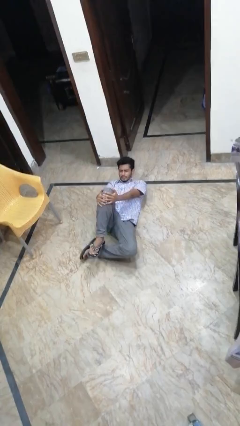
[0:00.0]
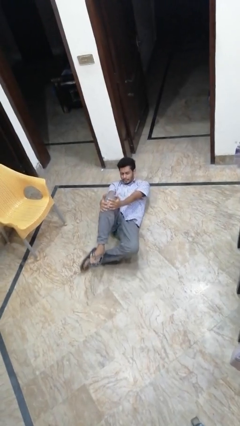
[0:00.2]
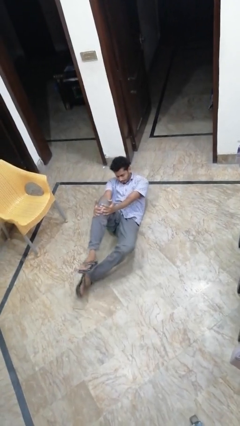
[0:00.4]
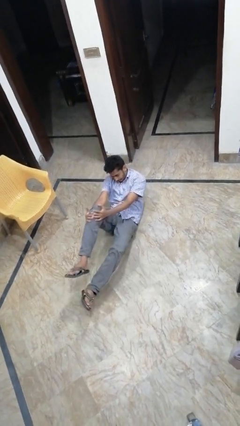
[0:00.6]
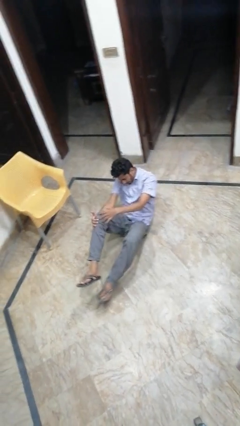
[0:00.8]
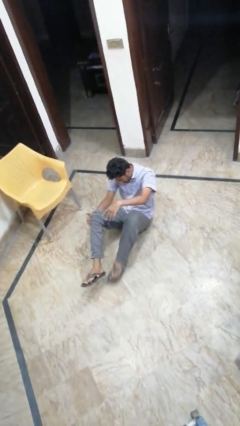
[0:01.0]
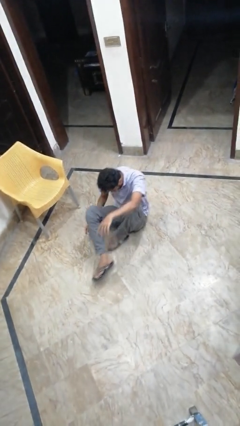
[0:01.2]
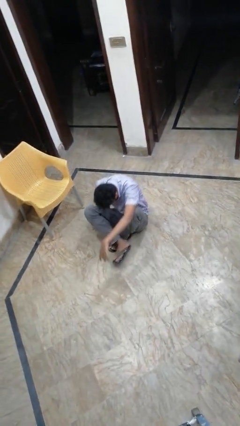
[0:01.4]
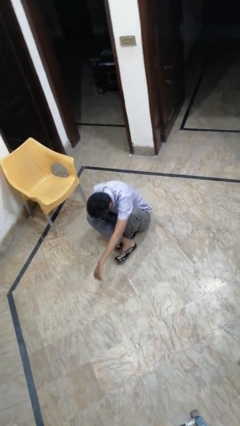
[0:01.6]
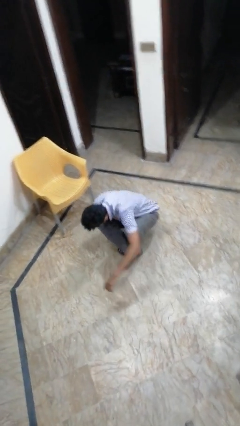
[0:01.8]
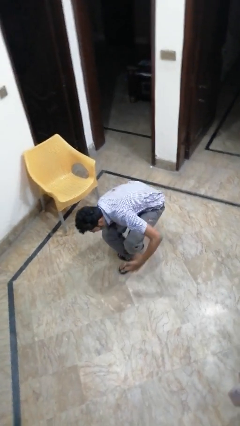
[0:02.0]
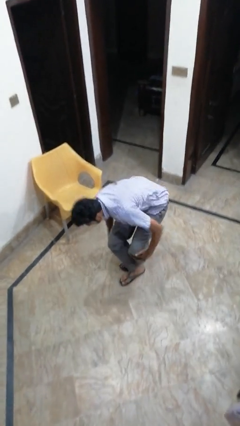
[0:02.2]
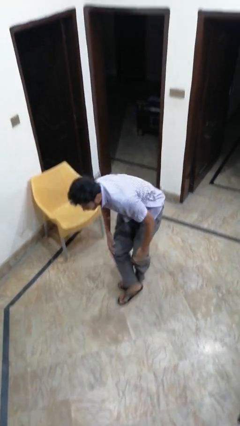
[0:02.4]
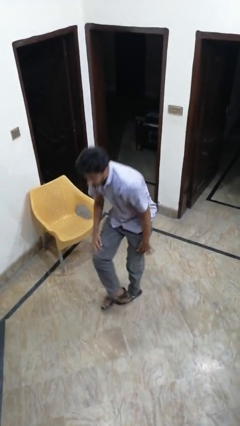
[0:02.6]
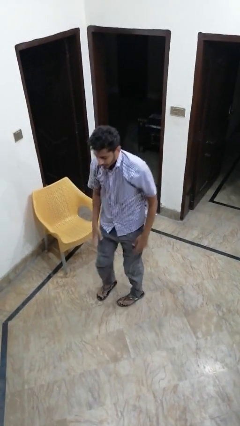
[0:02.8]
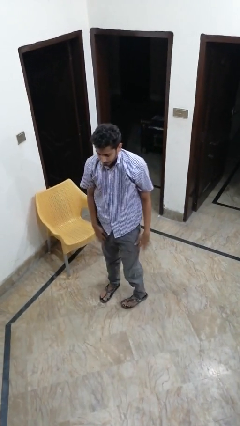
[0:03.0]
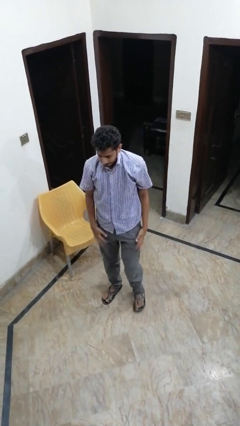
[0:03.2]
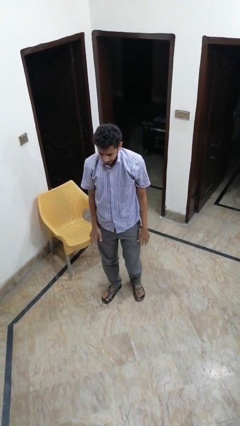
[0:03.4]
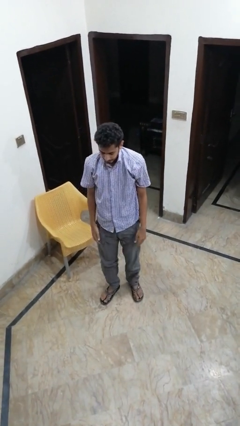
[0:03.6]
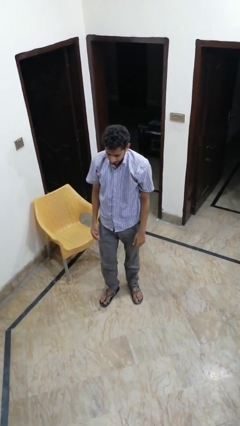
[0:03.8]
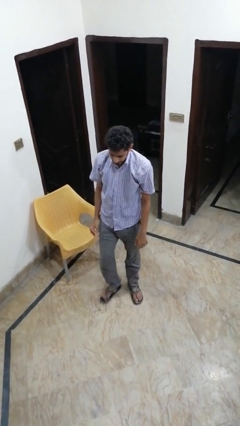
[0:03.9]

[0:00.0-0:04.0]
person stands up from floor

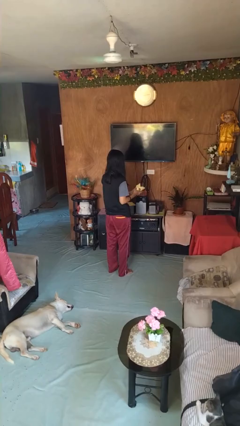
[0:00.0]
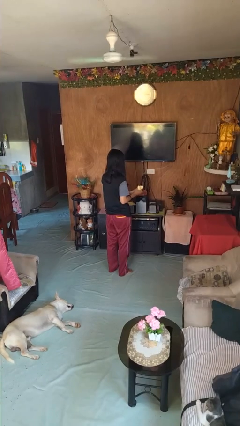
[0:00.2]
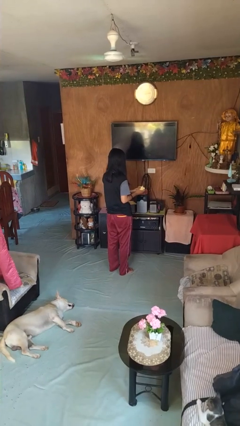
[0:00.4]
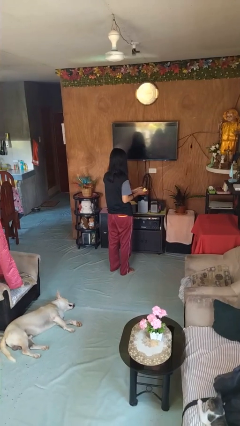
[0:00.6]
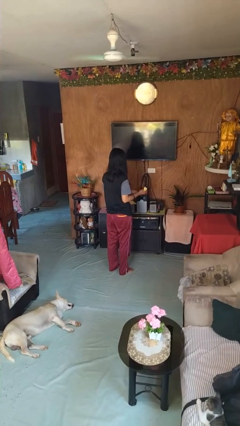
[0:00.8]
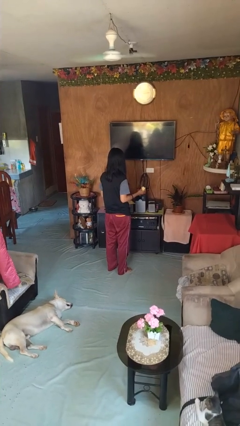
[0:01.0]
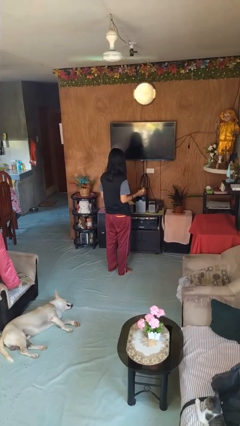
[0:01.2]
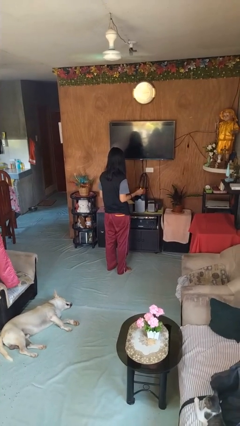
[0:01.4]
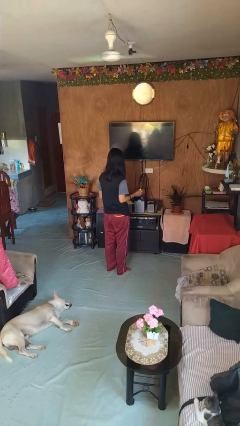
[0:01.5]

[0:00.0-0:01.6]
person crumples paper

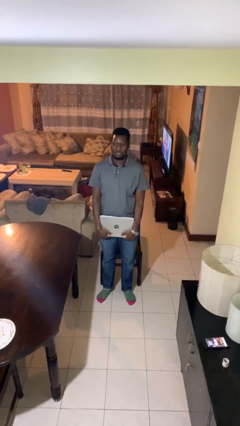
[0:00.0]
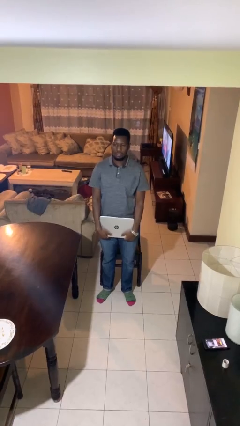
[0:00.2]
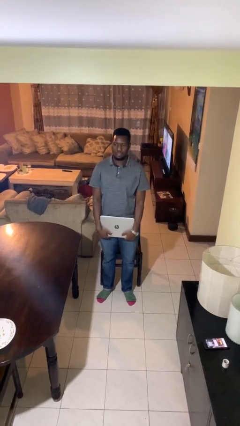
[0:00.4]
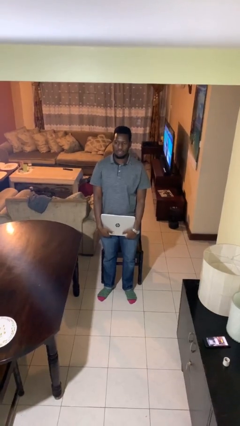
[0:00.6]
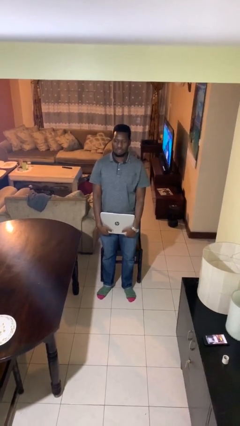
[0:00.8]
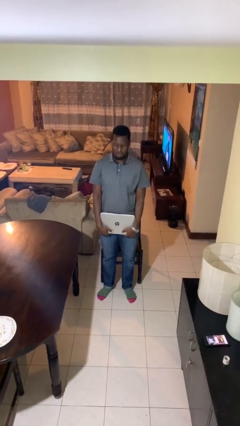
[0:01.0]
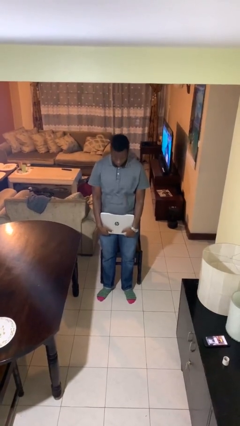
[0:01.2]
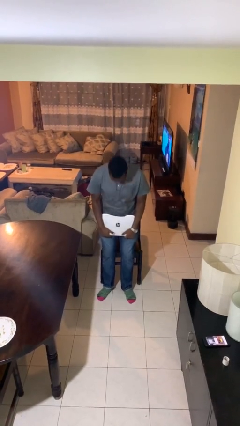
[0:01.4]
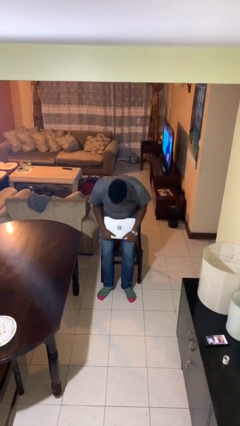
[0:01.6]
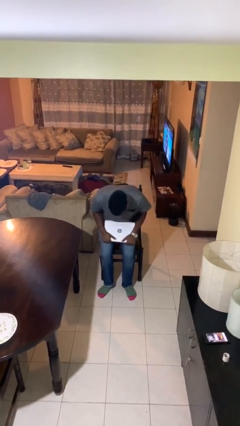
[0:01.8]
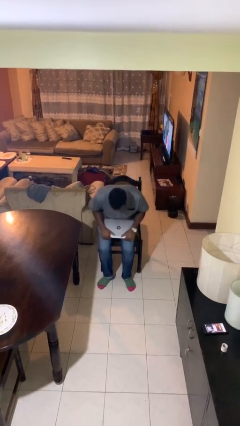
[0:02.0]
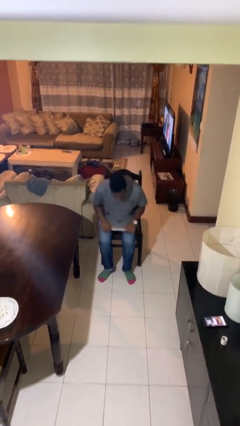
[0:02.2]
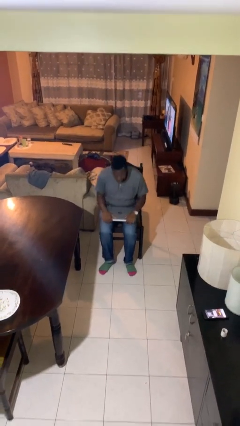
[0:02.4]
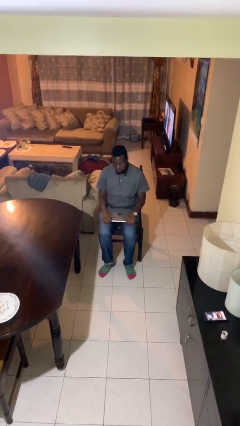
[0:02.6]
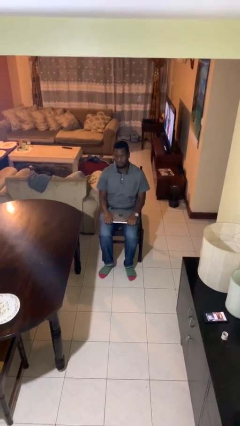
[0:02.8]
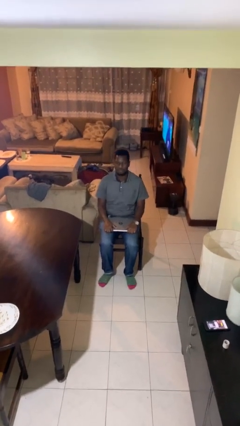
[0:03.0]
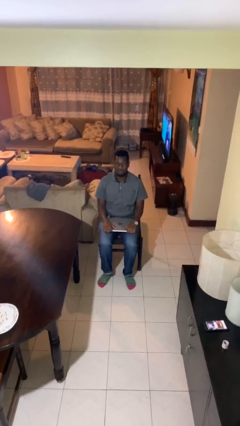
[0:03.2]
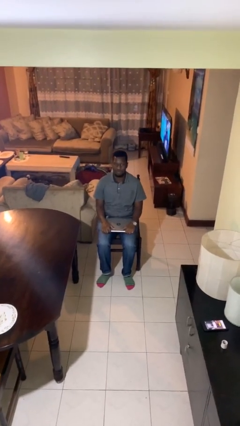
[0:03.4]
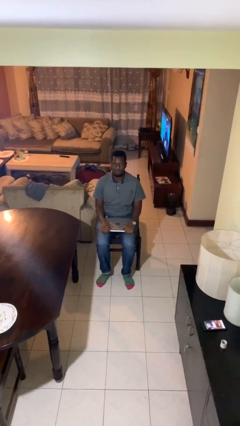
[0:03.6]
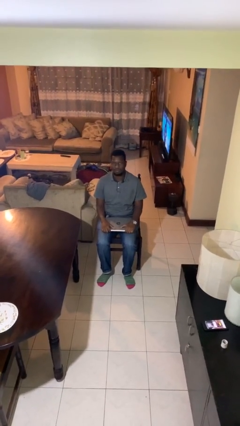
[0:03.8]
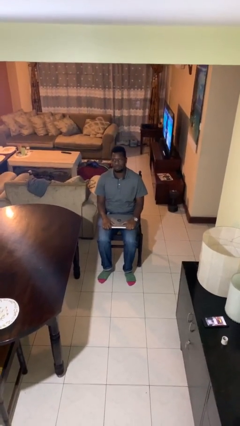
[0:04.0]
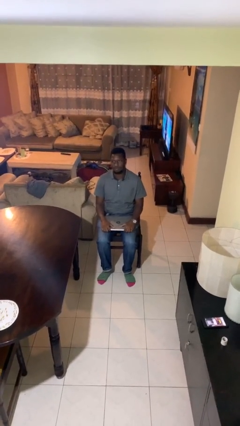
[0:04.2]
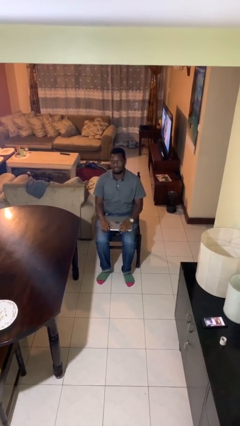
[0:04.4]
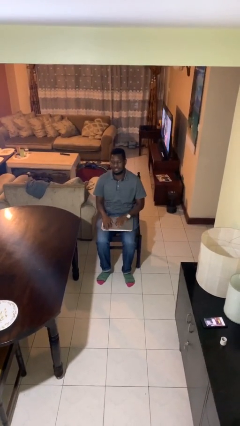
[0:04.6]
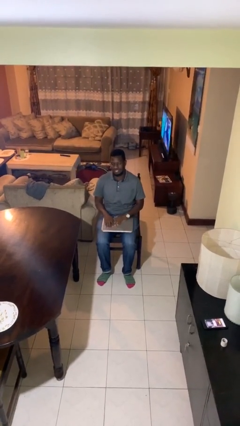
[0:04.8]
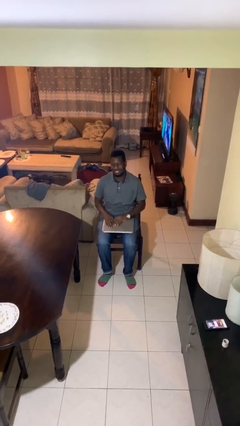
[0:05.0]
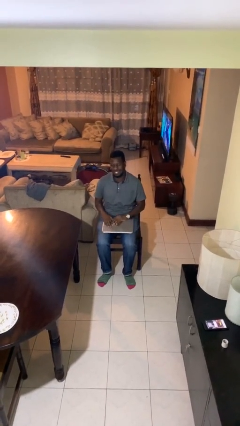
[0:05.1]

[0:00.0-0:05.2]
person sits down

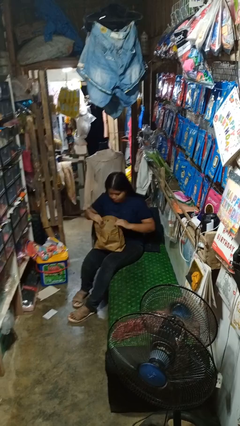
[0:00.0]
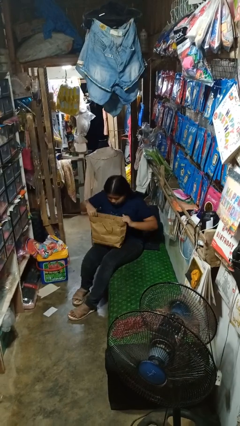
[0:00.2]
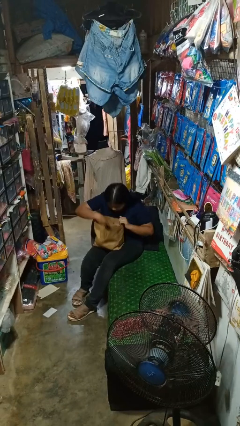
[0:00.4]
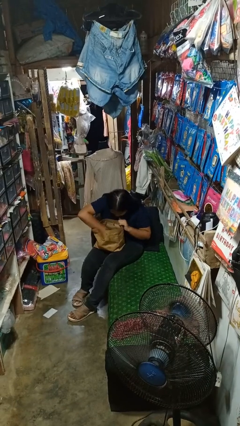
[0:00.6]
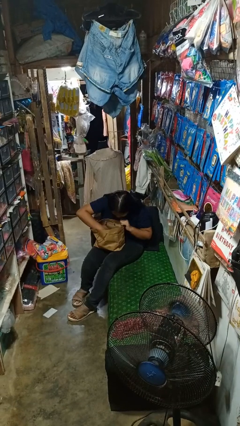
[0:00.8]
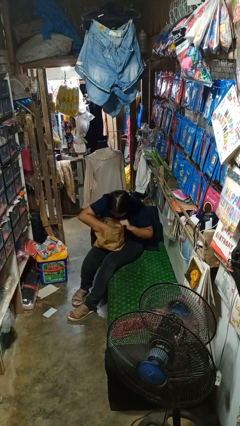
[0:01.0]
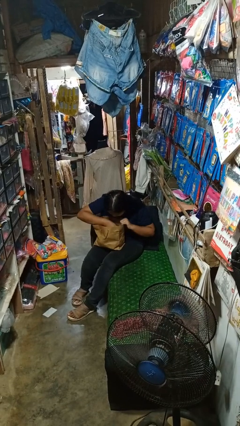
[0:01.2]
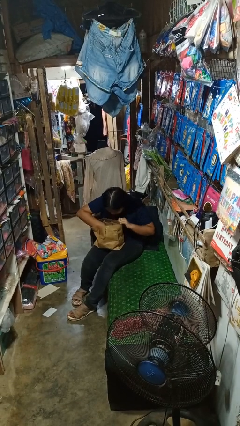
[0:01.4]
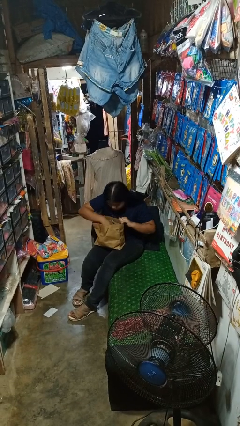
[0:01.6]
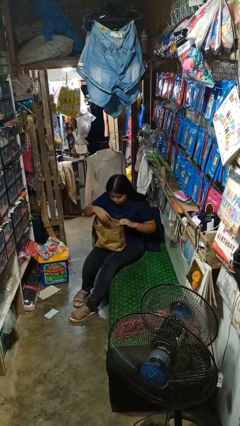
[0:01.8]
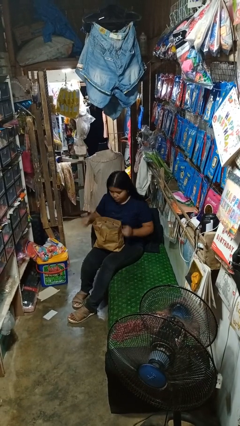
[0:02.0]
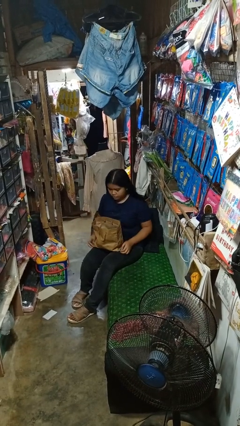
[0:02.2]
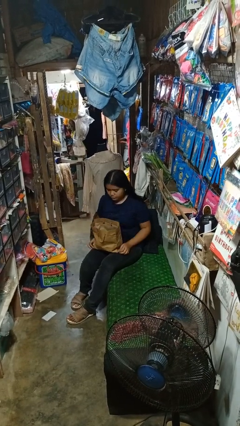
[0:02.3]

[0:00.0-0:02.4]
person searches in bag

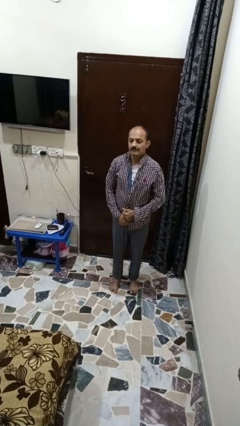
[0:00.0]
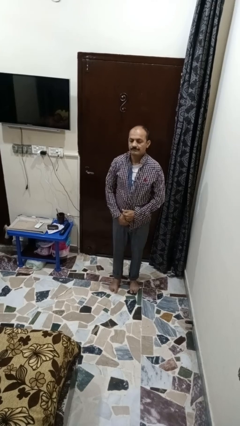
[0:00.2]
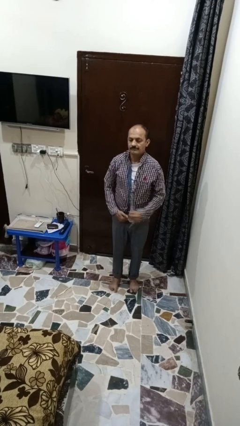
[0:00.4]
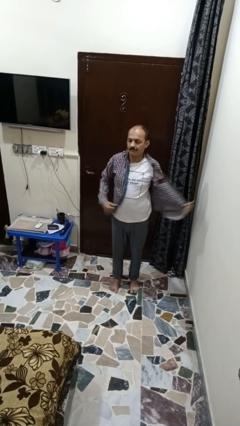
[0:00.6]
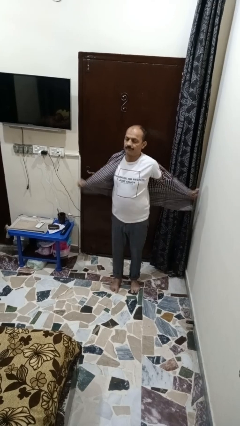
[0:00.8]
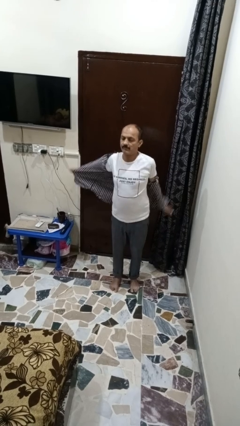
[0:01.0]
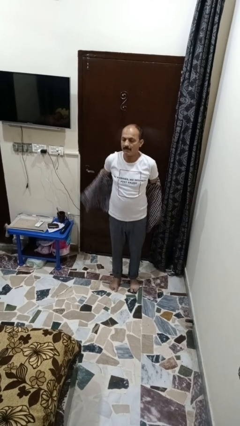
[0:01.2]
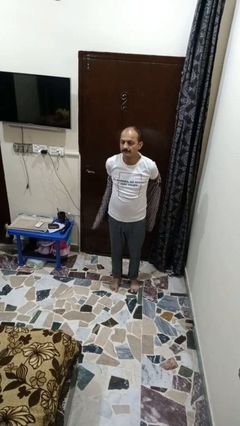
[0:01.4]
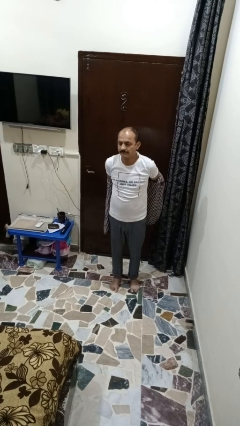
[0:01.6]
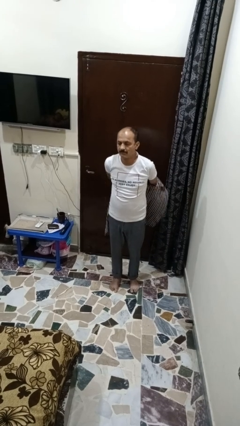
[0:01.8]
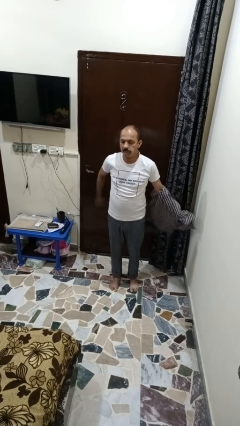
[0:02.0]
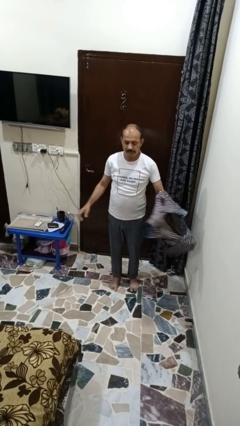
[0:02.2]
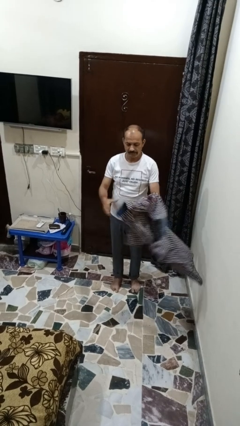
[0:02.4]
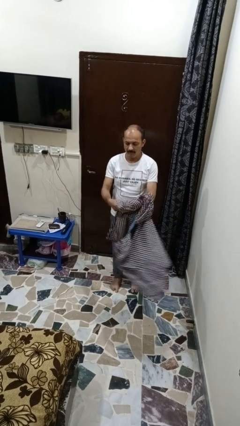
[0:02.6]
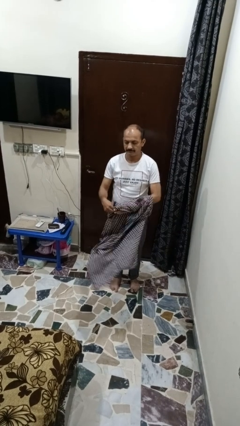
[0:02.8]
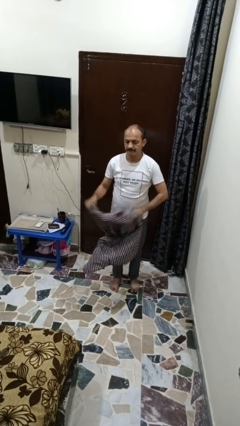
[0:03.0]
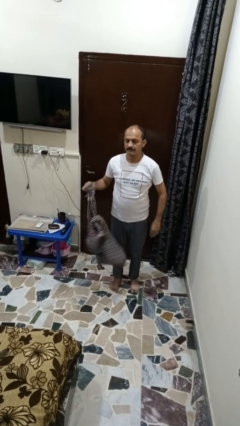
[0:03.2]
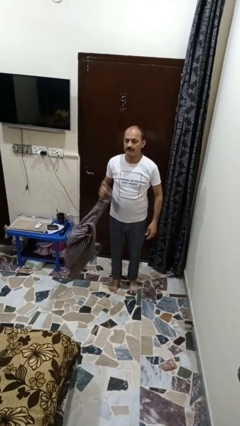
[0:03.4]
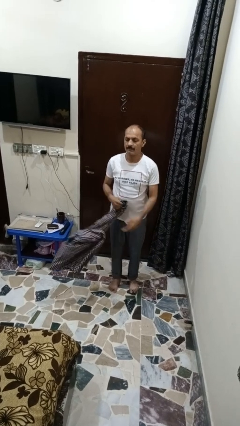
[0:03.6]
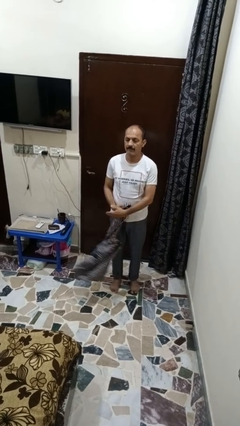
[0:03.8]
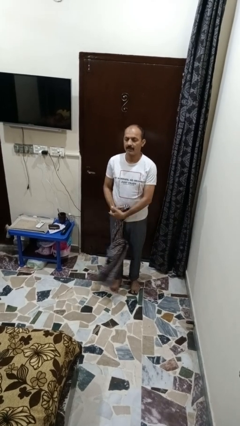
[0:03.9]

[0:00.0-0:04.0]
person takes off shirt

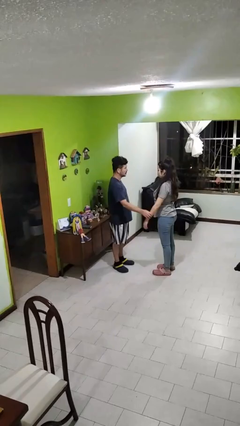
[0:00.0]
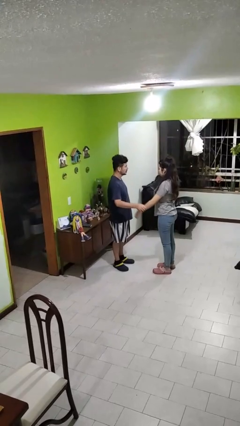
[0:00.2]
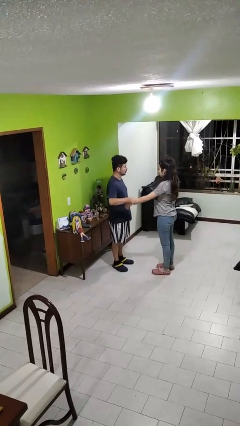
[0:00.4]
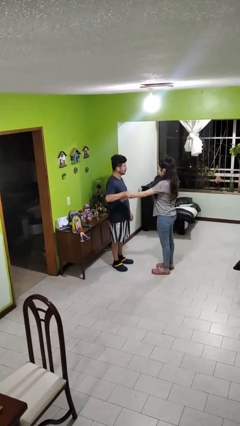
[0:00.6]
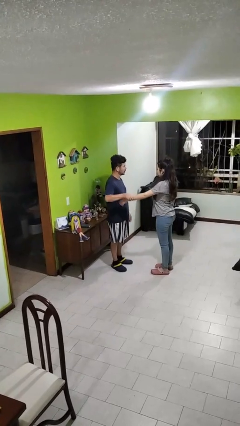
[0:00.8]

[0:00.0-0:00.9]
person grabs person by forearm
